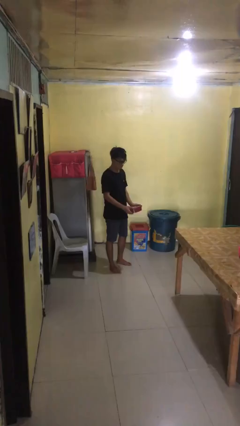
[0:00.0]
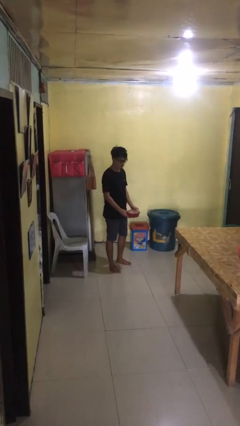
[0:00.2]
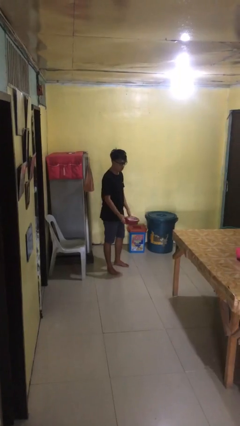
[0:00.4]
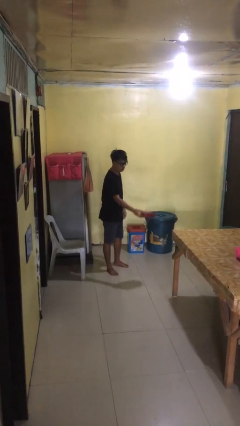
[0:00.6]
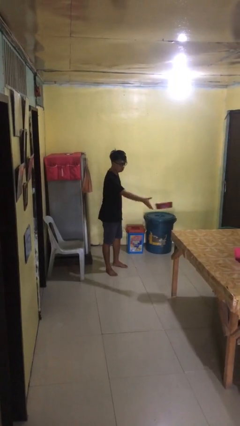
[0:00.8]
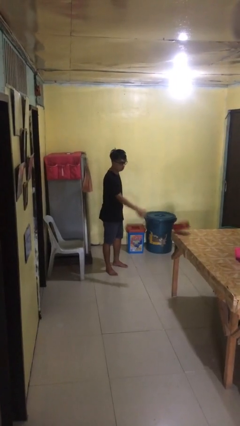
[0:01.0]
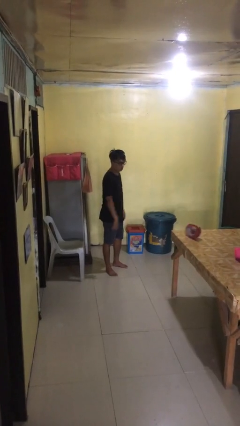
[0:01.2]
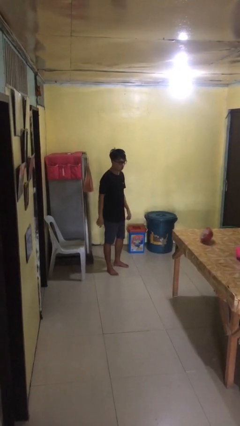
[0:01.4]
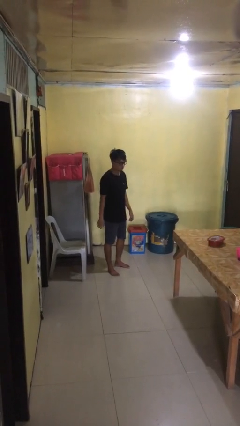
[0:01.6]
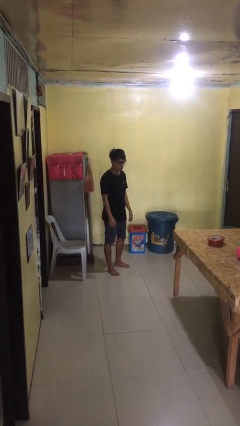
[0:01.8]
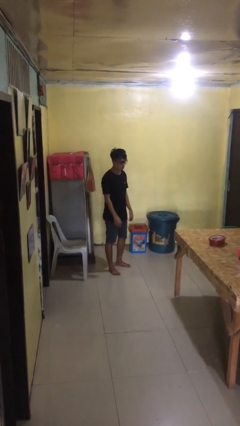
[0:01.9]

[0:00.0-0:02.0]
person throws object on table

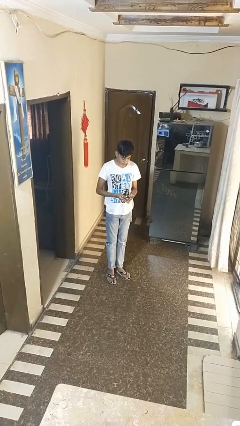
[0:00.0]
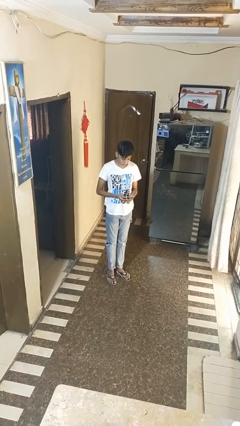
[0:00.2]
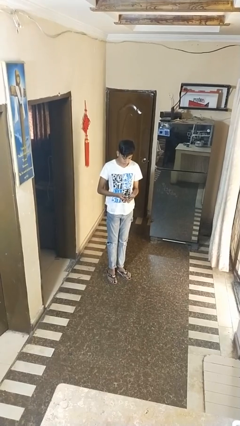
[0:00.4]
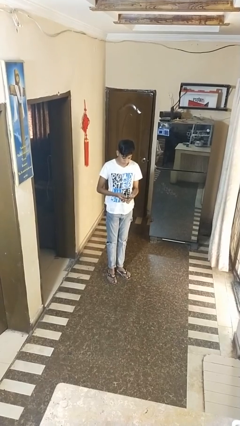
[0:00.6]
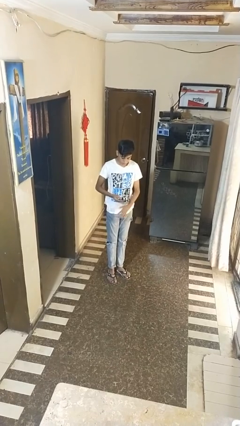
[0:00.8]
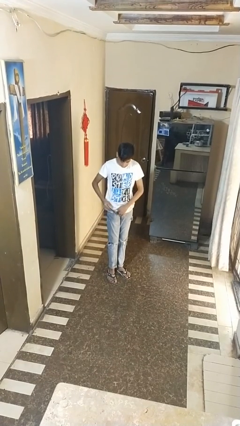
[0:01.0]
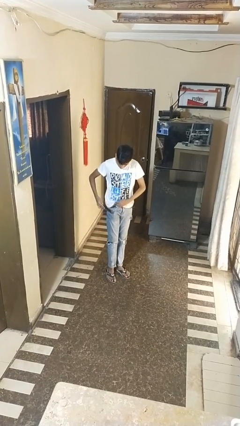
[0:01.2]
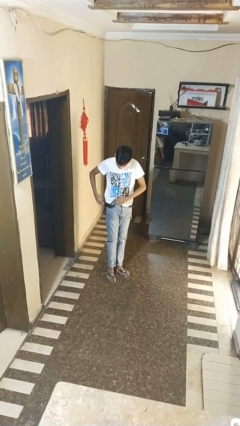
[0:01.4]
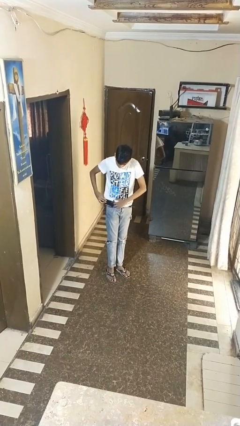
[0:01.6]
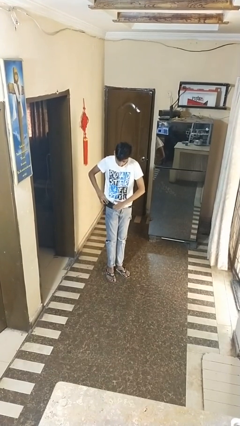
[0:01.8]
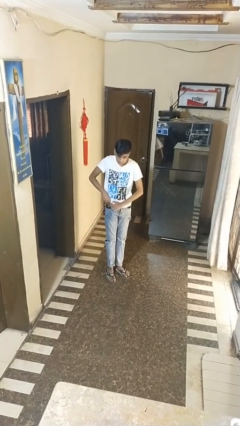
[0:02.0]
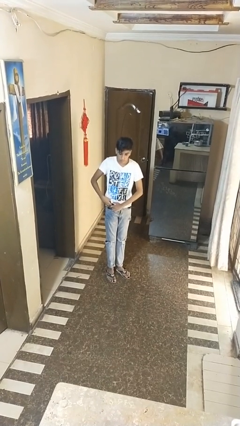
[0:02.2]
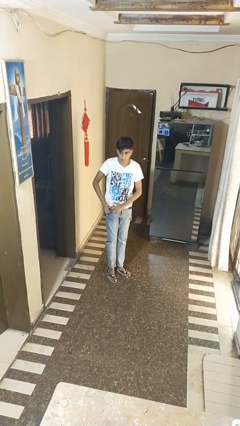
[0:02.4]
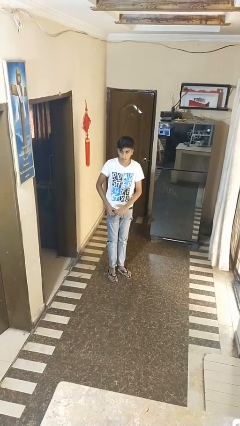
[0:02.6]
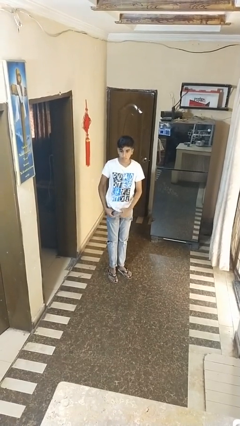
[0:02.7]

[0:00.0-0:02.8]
person puts phone into pocket

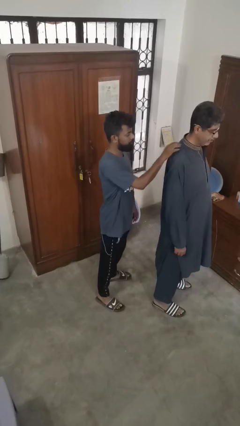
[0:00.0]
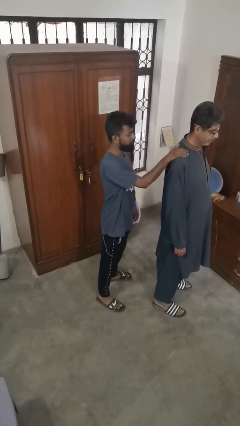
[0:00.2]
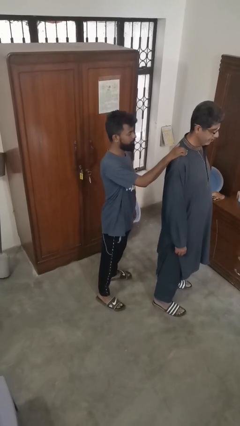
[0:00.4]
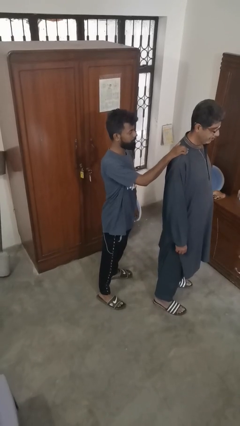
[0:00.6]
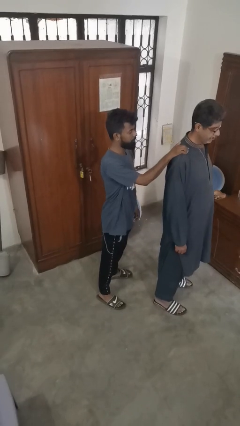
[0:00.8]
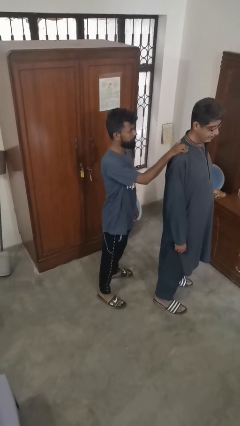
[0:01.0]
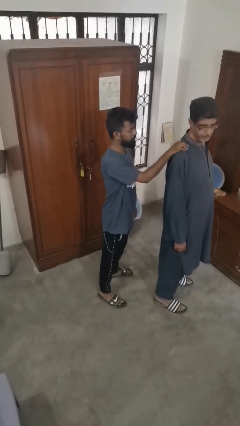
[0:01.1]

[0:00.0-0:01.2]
person grabs person by shoulder

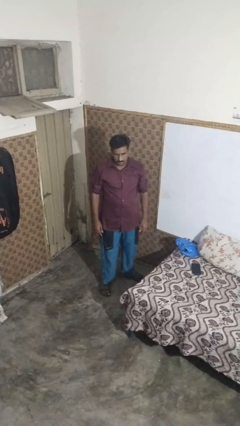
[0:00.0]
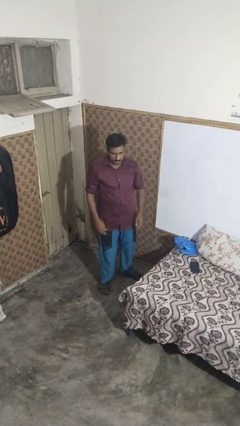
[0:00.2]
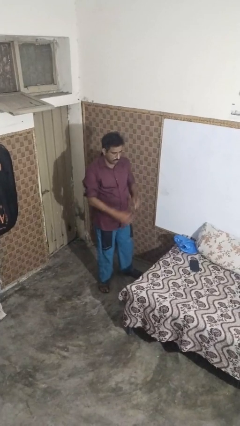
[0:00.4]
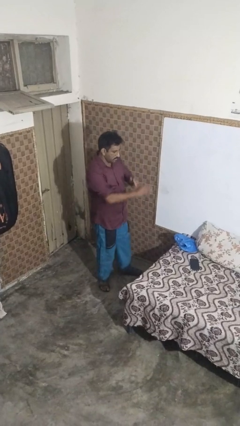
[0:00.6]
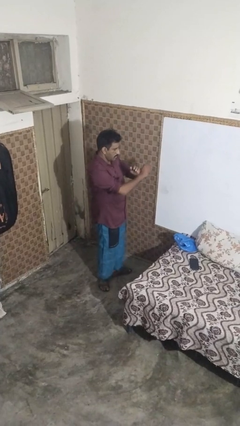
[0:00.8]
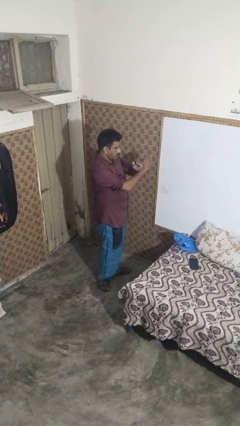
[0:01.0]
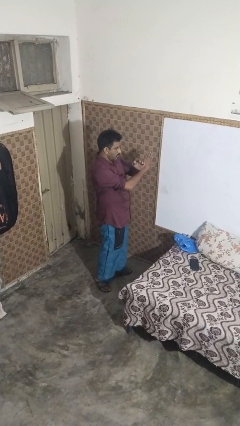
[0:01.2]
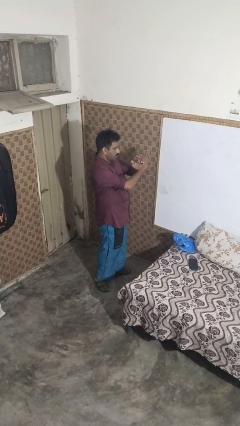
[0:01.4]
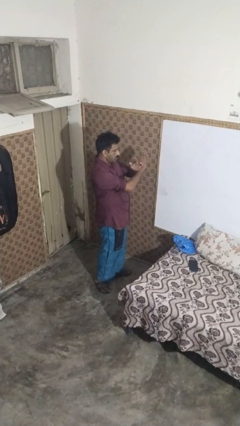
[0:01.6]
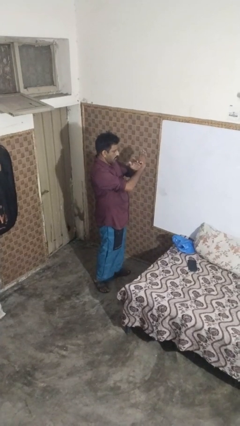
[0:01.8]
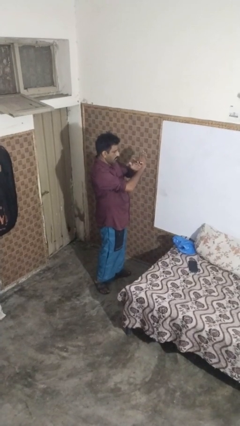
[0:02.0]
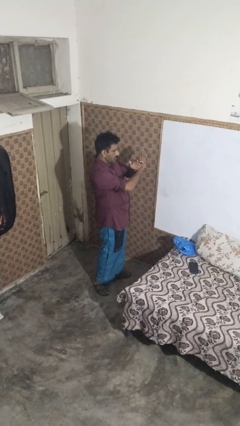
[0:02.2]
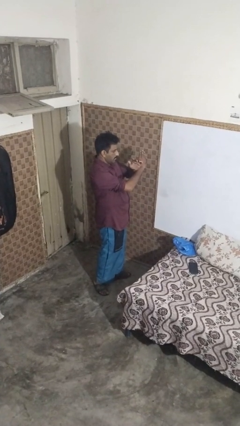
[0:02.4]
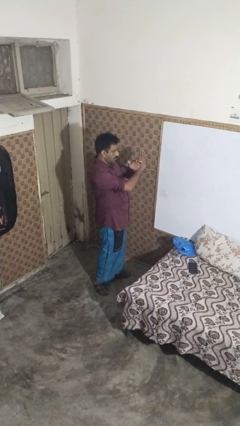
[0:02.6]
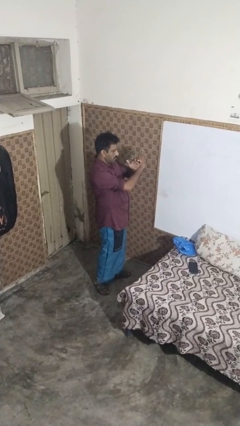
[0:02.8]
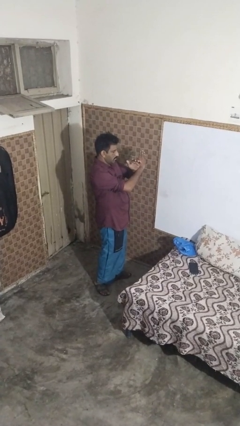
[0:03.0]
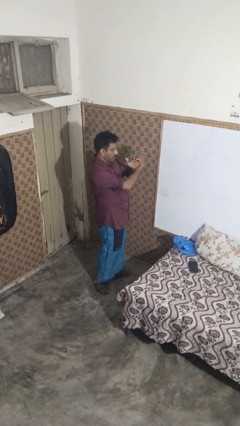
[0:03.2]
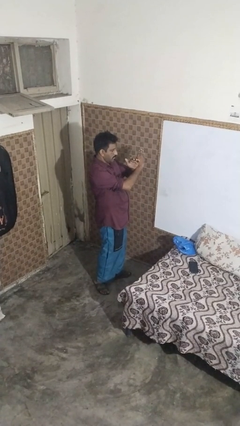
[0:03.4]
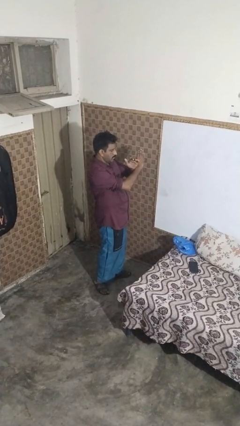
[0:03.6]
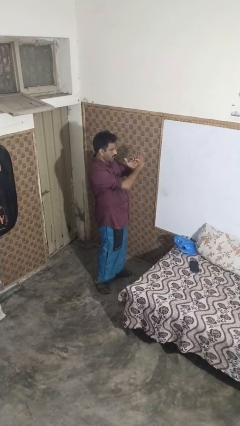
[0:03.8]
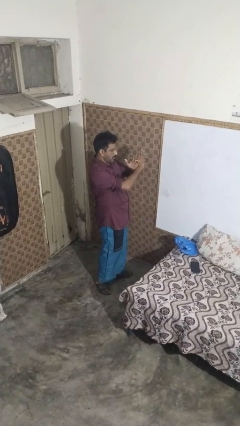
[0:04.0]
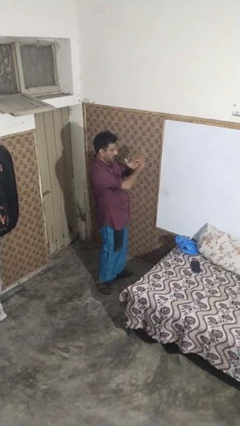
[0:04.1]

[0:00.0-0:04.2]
person gestures arms x

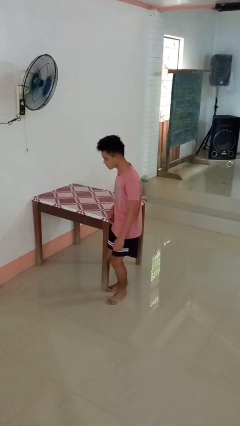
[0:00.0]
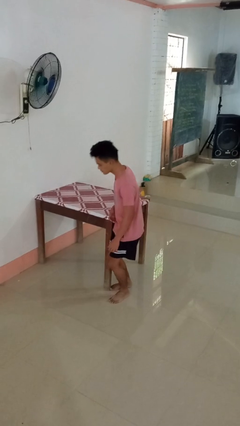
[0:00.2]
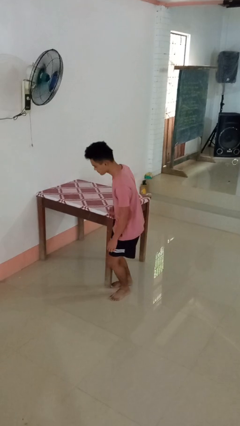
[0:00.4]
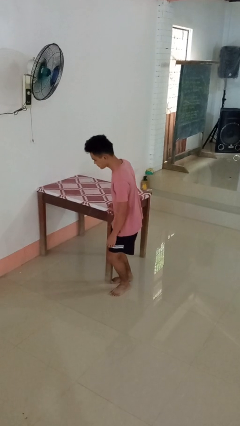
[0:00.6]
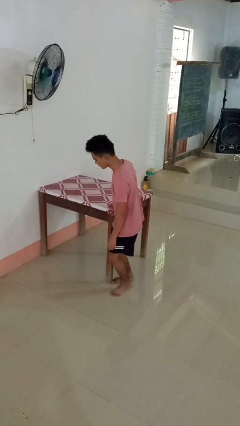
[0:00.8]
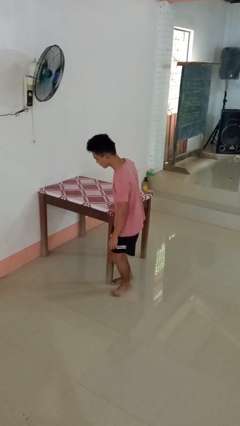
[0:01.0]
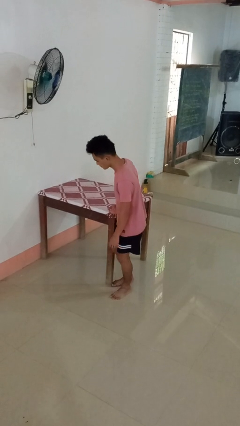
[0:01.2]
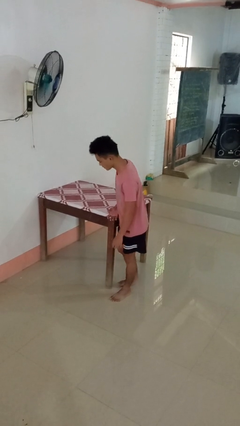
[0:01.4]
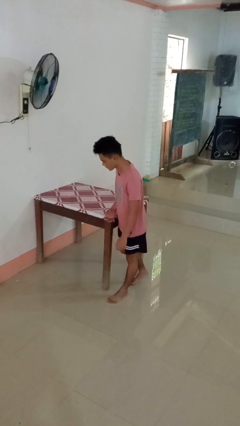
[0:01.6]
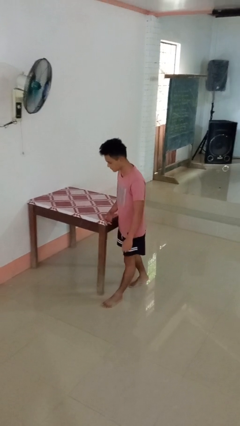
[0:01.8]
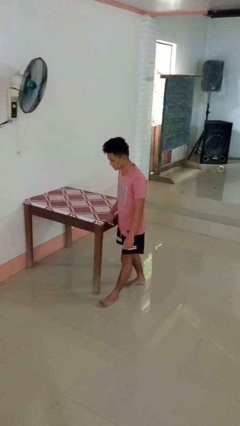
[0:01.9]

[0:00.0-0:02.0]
person stubs toe

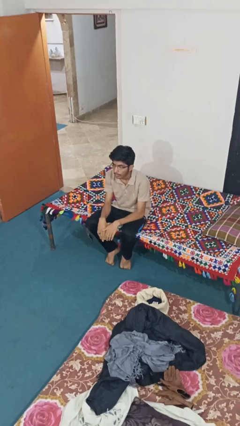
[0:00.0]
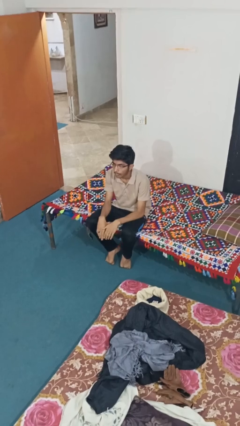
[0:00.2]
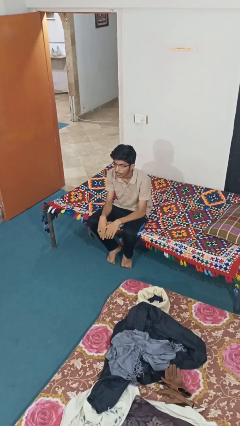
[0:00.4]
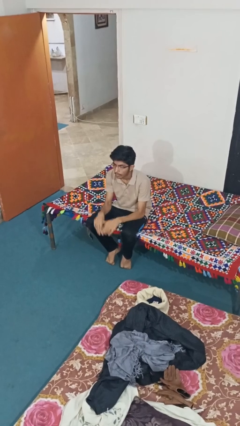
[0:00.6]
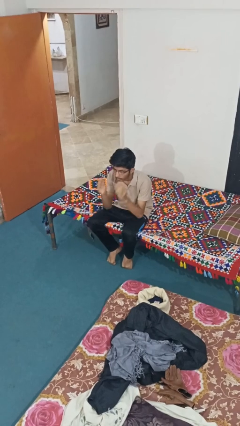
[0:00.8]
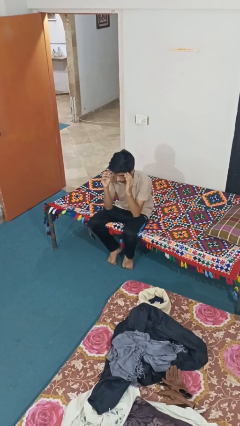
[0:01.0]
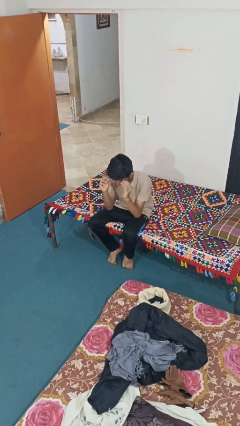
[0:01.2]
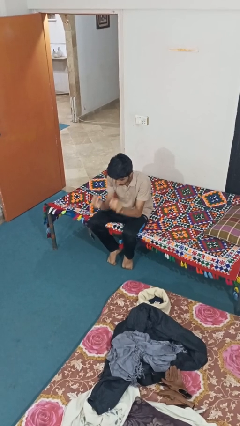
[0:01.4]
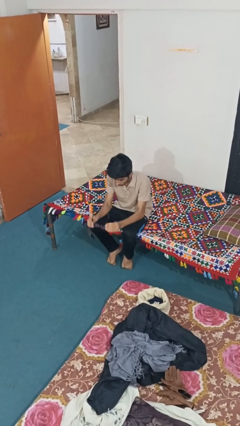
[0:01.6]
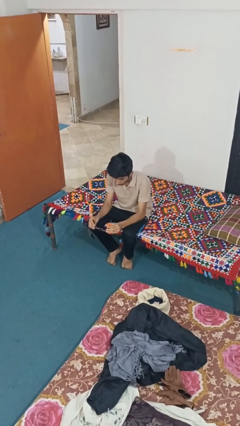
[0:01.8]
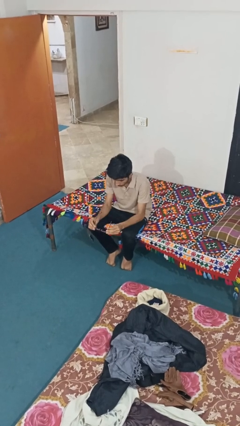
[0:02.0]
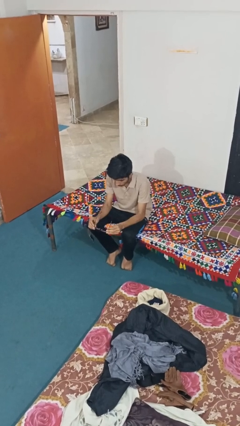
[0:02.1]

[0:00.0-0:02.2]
person takes off glasses

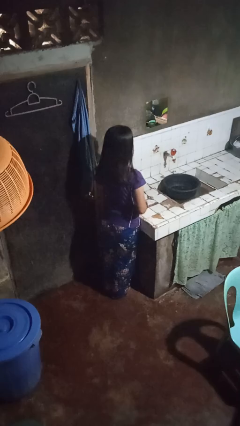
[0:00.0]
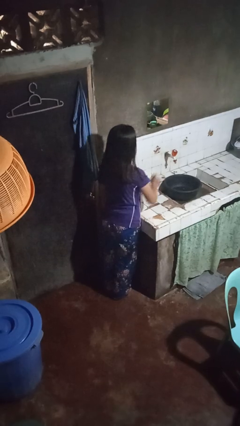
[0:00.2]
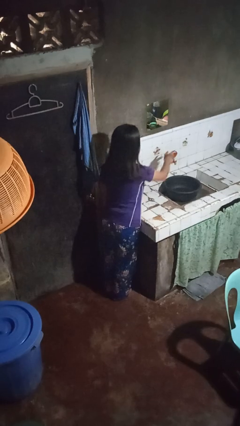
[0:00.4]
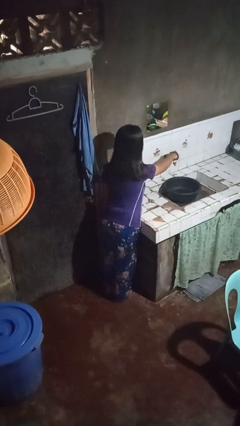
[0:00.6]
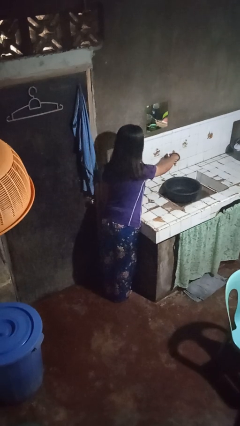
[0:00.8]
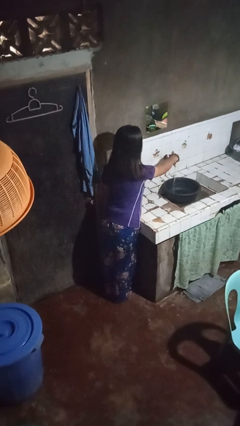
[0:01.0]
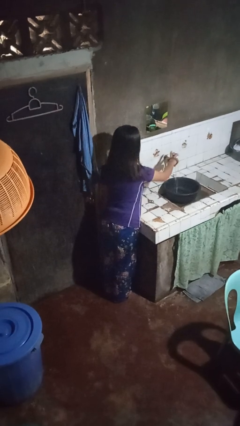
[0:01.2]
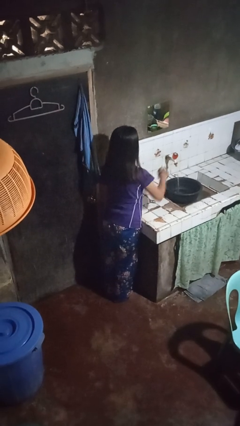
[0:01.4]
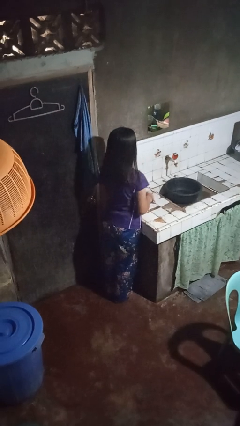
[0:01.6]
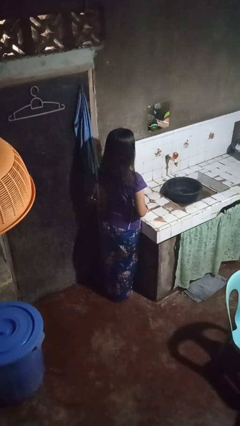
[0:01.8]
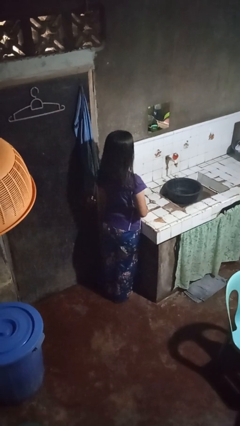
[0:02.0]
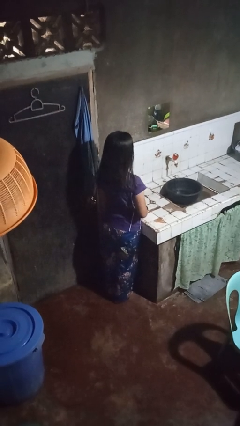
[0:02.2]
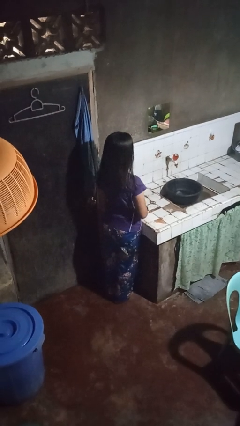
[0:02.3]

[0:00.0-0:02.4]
person turns on faucet

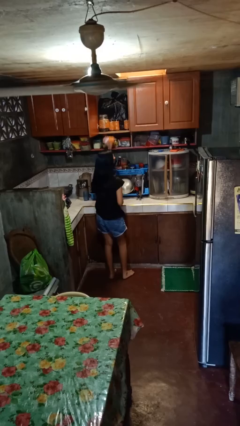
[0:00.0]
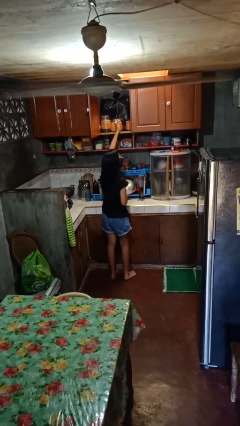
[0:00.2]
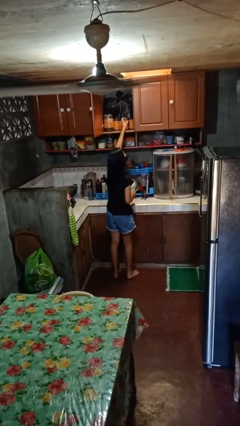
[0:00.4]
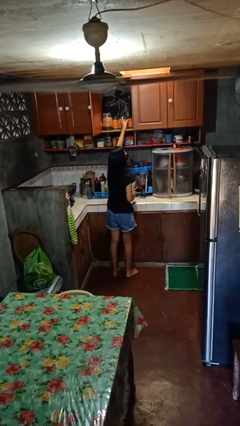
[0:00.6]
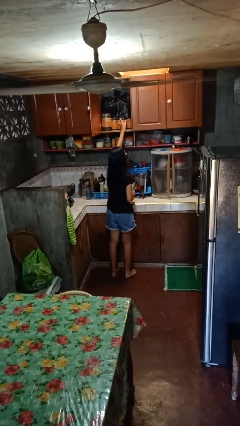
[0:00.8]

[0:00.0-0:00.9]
person puts down object into cabinet
